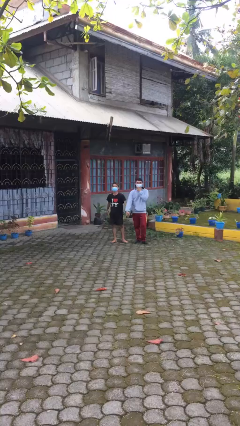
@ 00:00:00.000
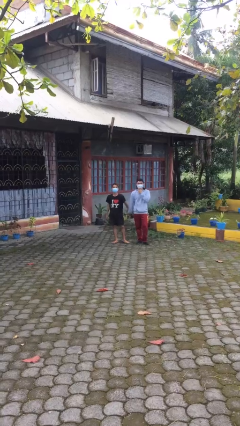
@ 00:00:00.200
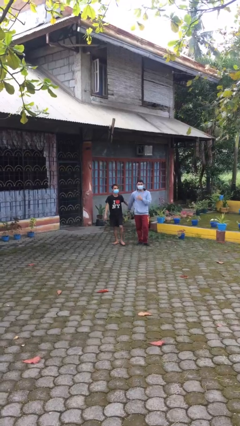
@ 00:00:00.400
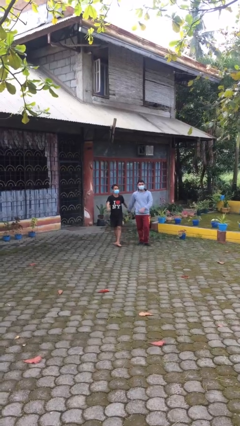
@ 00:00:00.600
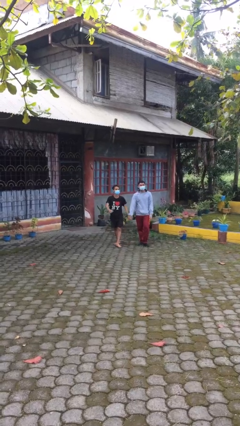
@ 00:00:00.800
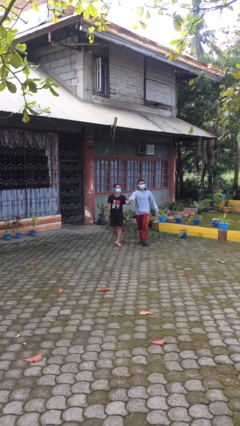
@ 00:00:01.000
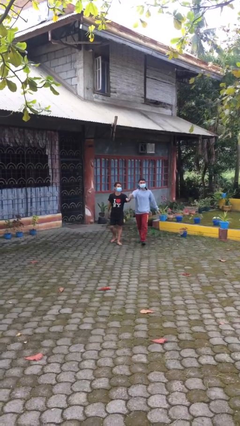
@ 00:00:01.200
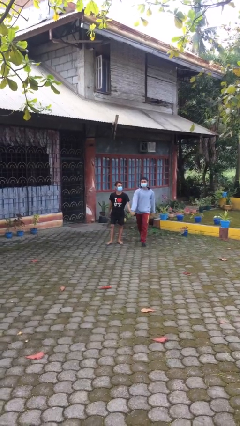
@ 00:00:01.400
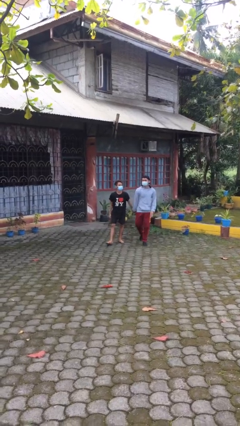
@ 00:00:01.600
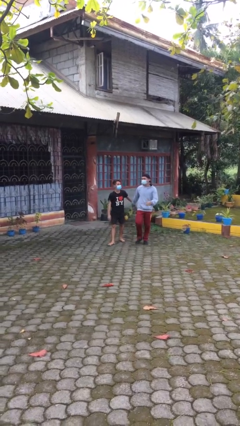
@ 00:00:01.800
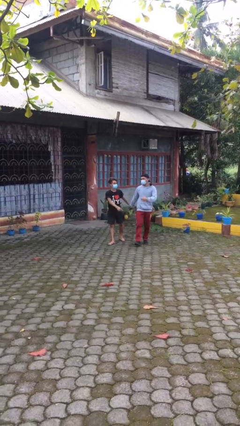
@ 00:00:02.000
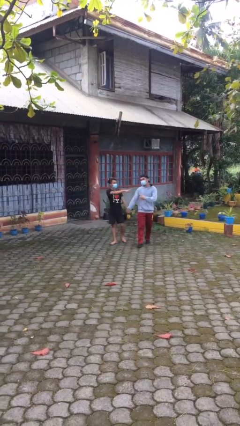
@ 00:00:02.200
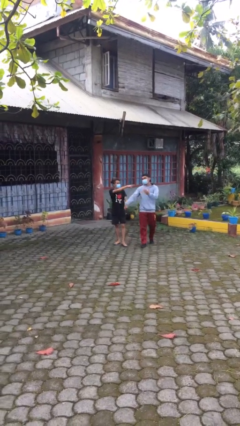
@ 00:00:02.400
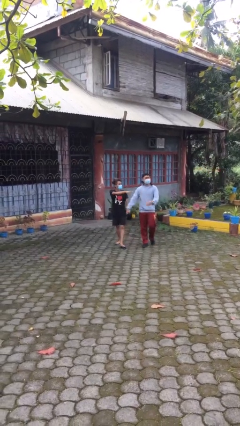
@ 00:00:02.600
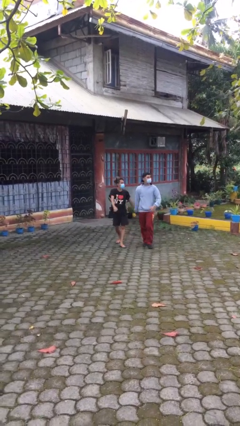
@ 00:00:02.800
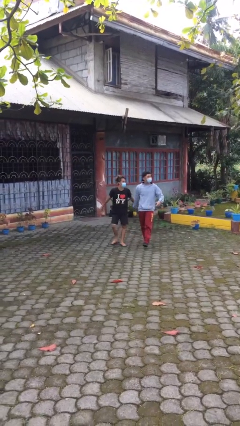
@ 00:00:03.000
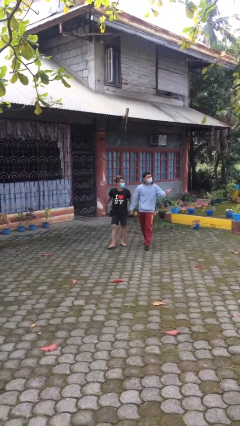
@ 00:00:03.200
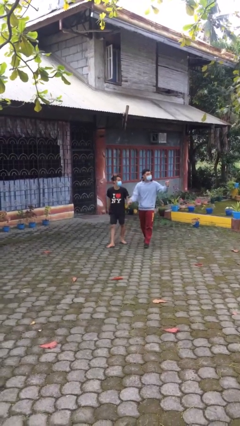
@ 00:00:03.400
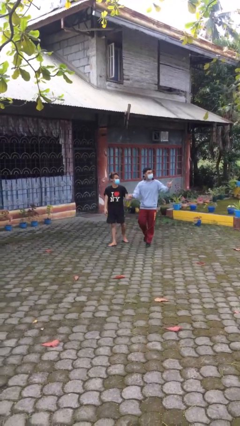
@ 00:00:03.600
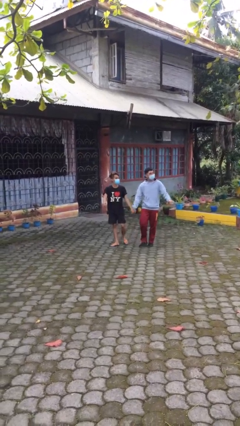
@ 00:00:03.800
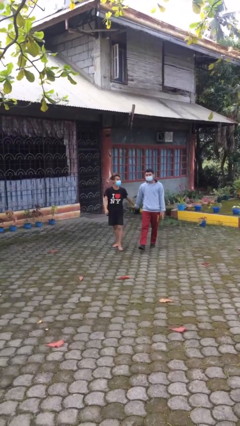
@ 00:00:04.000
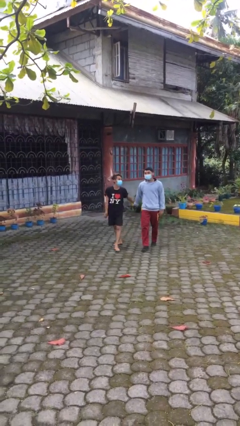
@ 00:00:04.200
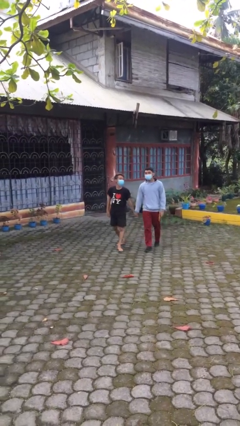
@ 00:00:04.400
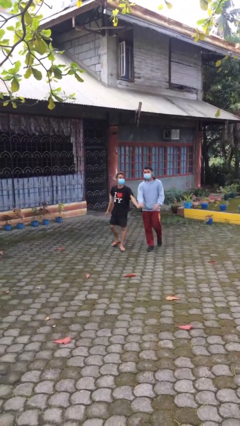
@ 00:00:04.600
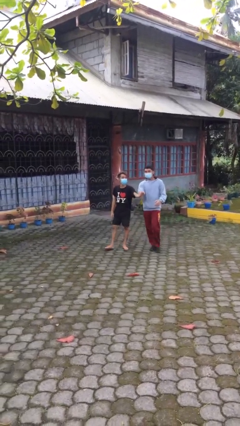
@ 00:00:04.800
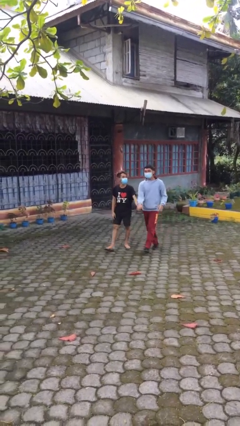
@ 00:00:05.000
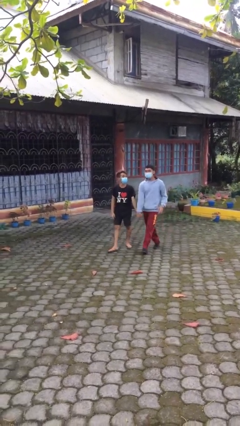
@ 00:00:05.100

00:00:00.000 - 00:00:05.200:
person holds hand

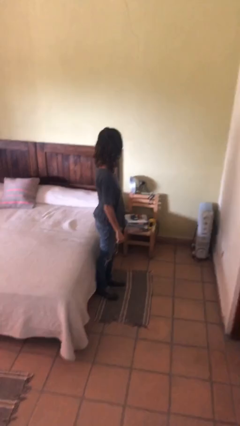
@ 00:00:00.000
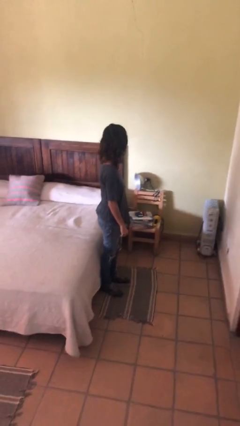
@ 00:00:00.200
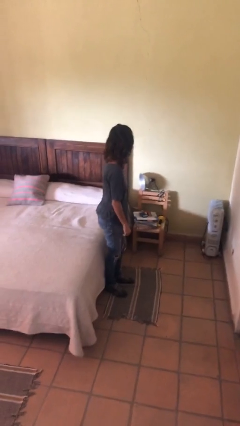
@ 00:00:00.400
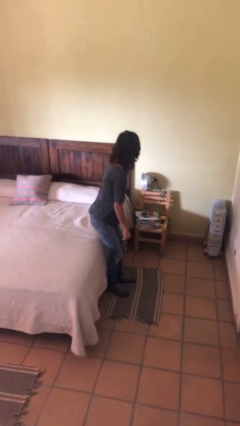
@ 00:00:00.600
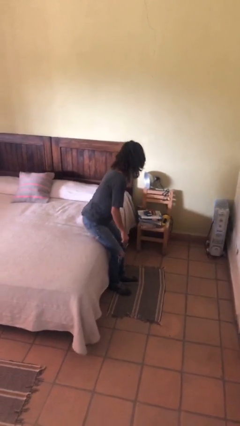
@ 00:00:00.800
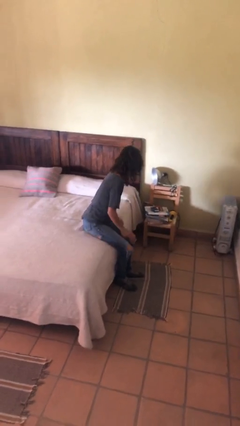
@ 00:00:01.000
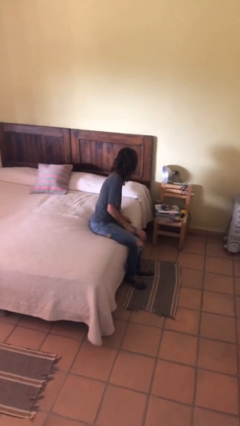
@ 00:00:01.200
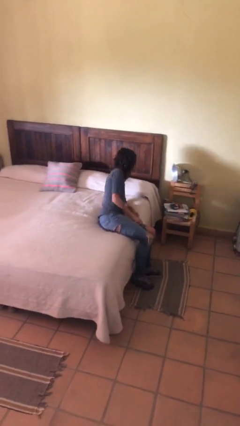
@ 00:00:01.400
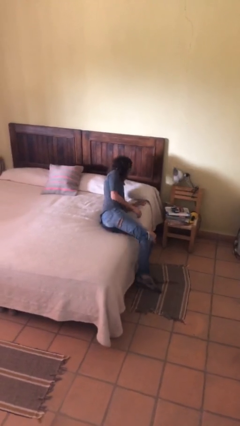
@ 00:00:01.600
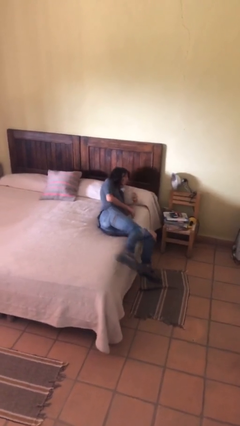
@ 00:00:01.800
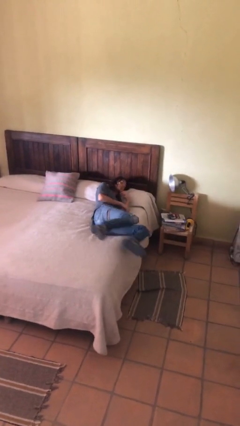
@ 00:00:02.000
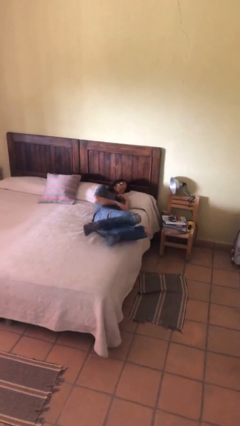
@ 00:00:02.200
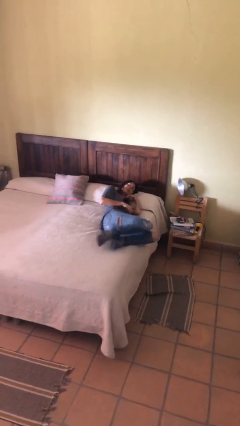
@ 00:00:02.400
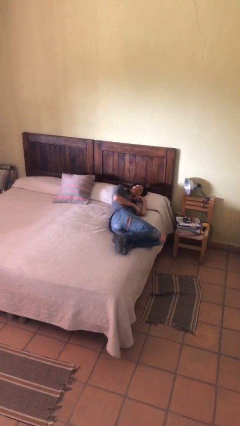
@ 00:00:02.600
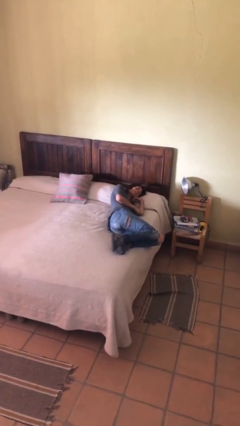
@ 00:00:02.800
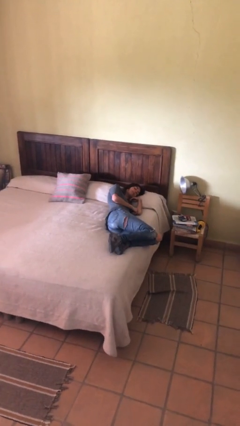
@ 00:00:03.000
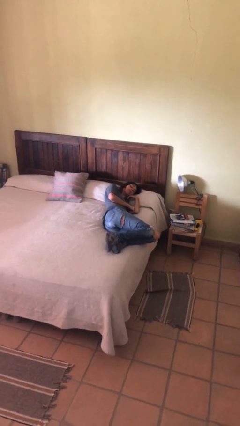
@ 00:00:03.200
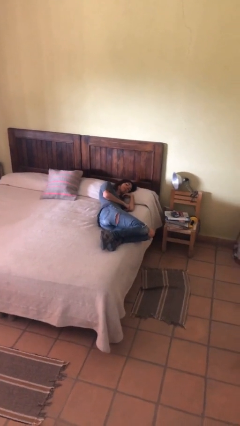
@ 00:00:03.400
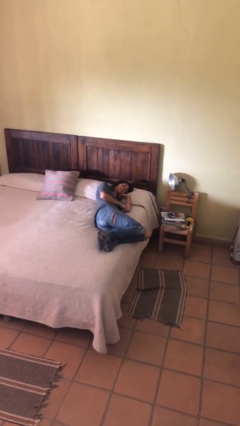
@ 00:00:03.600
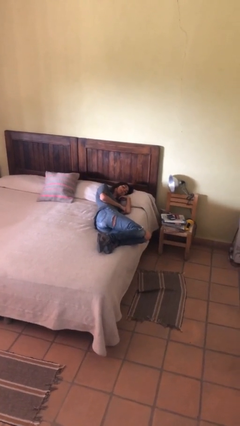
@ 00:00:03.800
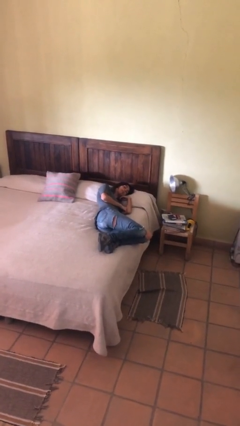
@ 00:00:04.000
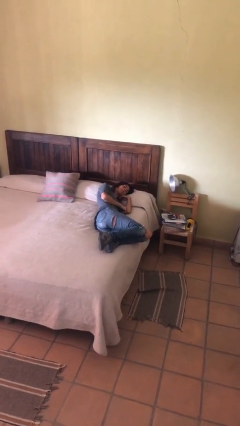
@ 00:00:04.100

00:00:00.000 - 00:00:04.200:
person lies down on bed

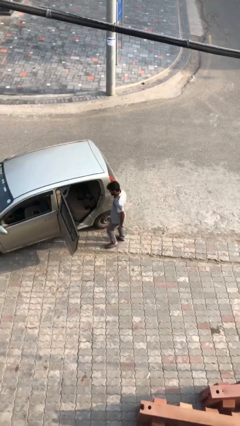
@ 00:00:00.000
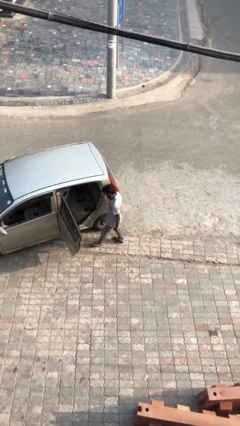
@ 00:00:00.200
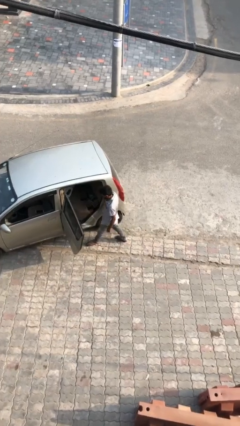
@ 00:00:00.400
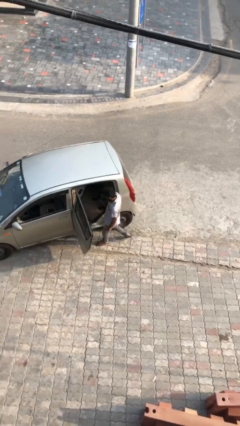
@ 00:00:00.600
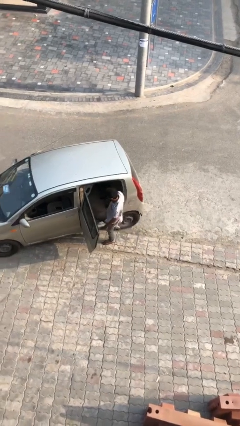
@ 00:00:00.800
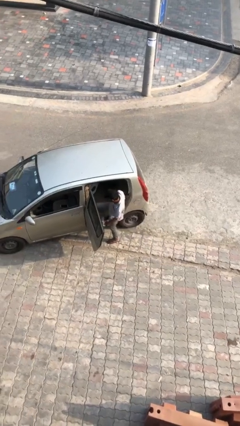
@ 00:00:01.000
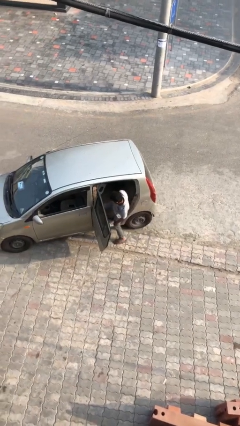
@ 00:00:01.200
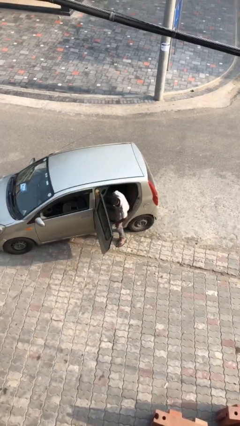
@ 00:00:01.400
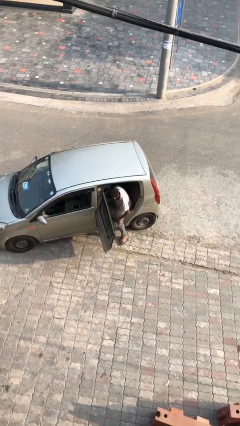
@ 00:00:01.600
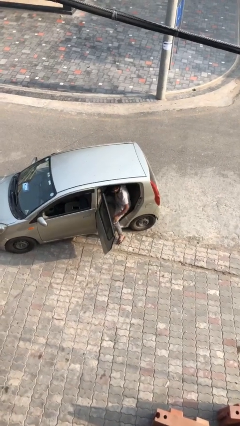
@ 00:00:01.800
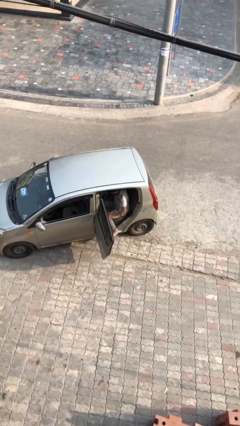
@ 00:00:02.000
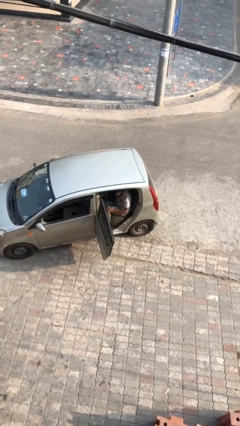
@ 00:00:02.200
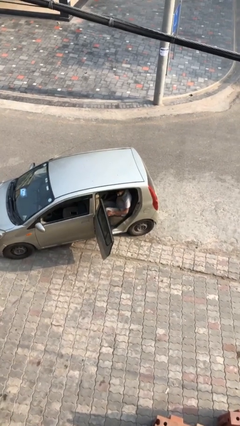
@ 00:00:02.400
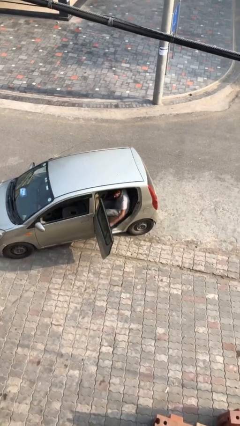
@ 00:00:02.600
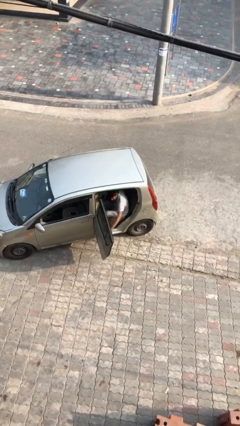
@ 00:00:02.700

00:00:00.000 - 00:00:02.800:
person enters car

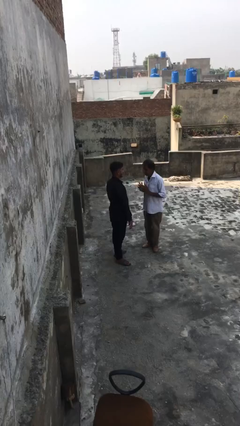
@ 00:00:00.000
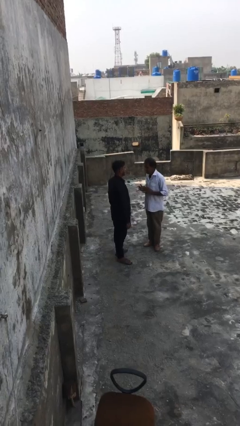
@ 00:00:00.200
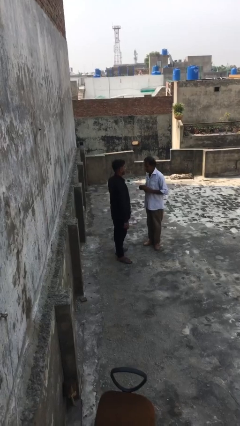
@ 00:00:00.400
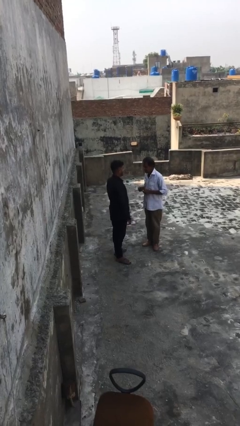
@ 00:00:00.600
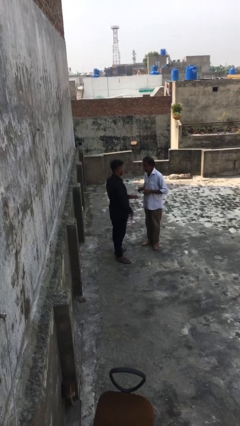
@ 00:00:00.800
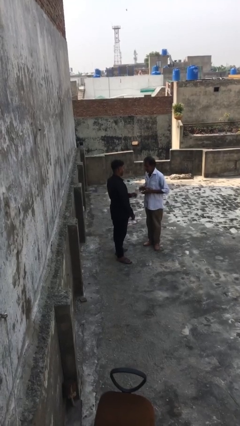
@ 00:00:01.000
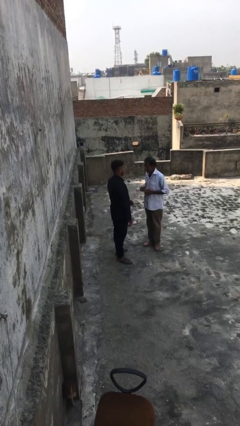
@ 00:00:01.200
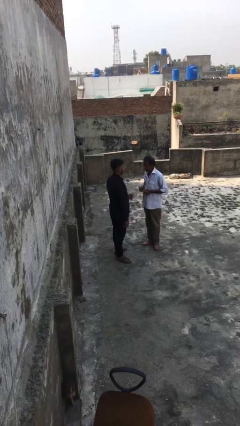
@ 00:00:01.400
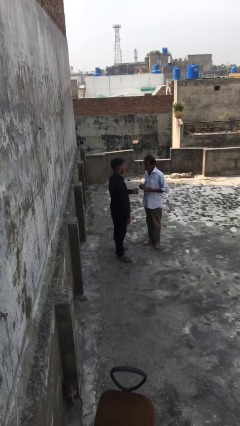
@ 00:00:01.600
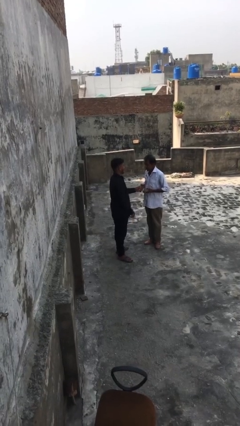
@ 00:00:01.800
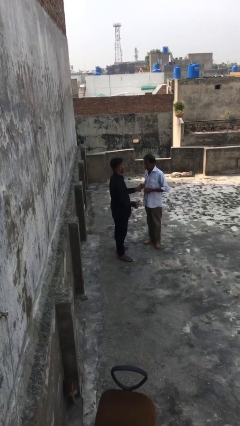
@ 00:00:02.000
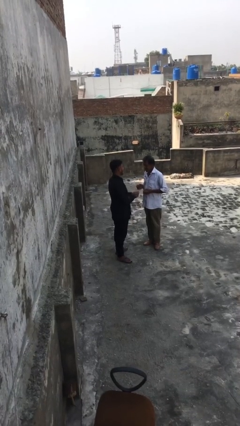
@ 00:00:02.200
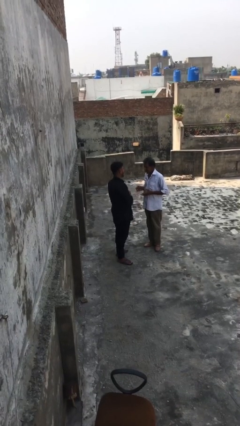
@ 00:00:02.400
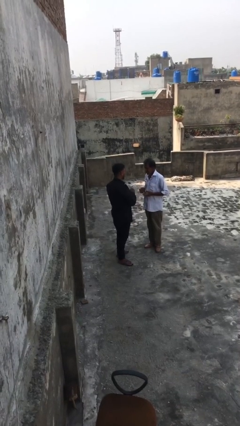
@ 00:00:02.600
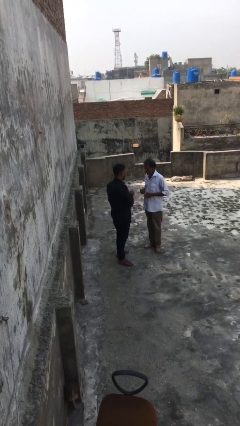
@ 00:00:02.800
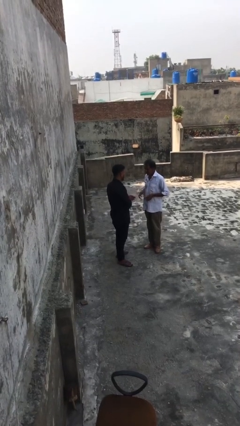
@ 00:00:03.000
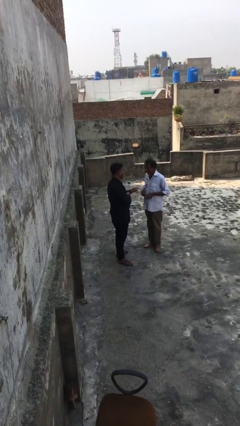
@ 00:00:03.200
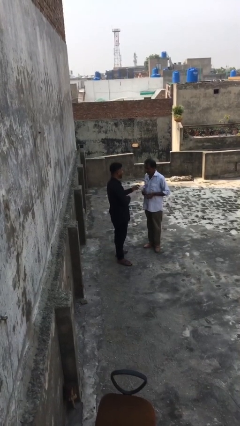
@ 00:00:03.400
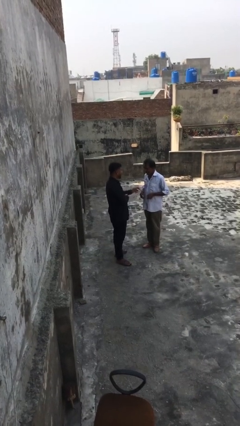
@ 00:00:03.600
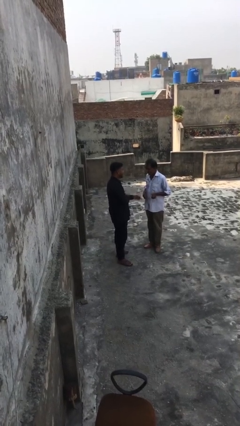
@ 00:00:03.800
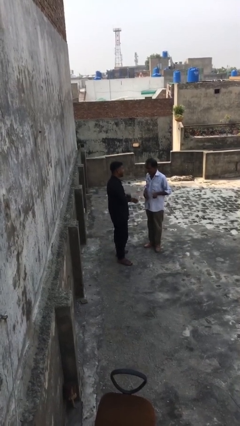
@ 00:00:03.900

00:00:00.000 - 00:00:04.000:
person talks to person

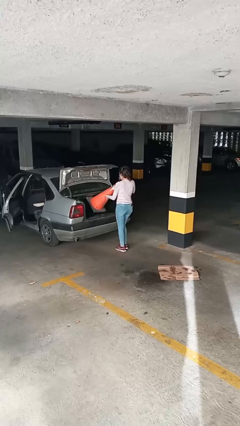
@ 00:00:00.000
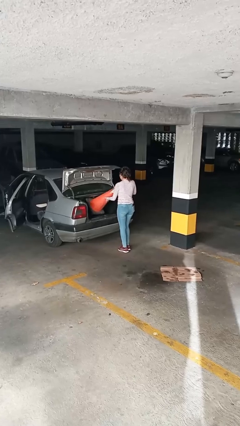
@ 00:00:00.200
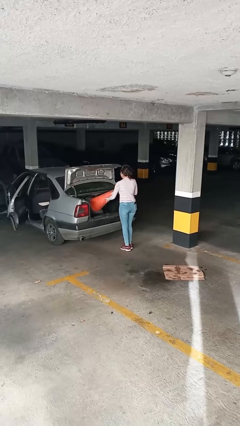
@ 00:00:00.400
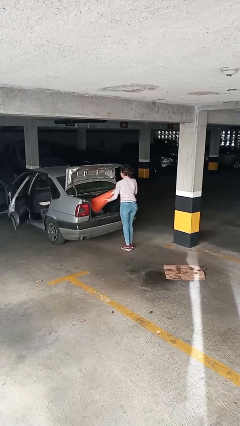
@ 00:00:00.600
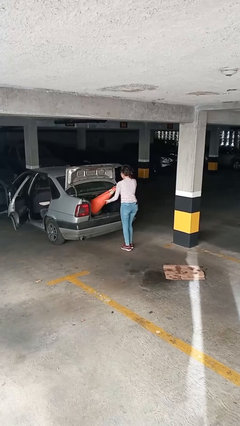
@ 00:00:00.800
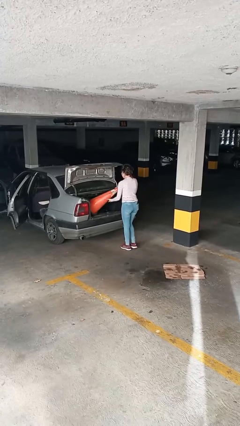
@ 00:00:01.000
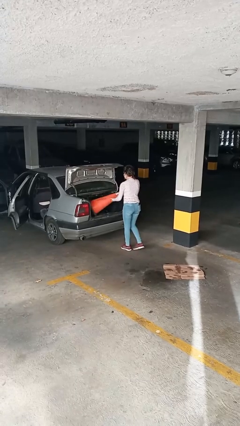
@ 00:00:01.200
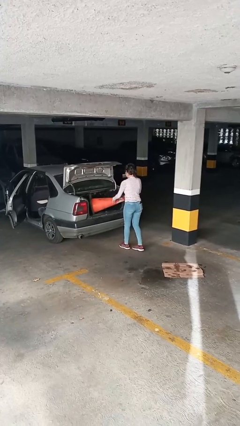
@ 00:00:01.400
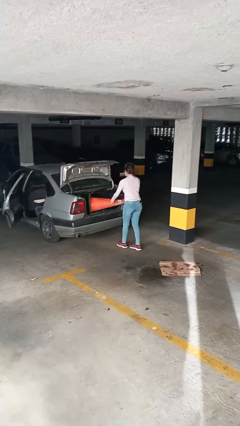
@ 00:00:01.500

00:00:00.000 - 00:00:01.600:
person loads car
